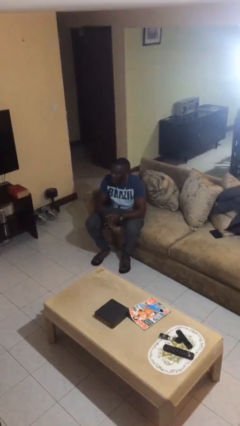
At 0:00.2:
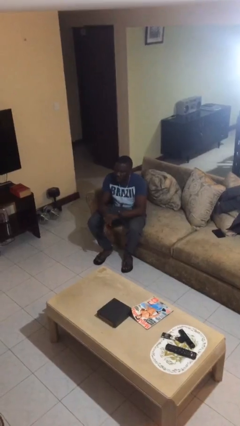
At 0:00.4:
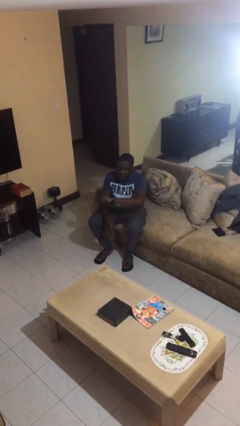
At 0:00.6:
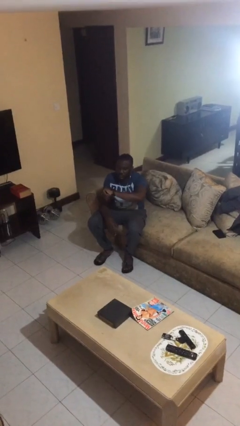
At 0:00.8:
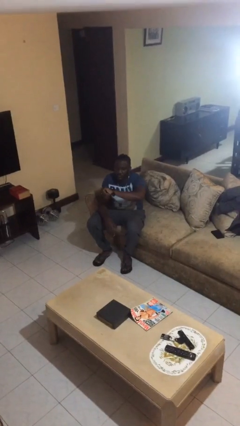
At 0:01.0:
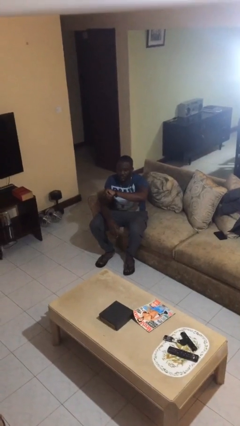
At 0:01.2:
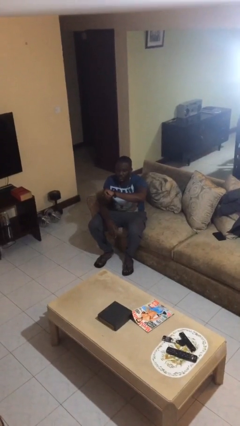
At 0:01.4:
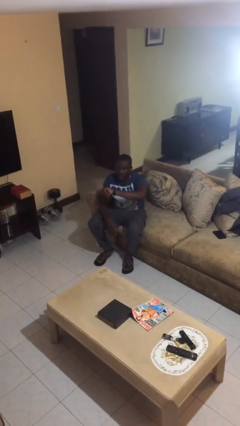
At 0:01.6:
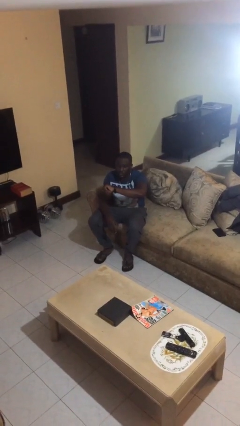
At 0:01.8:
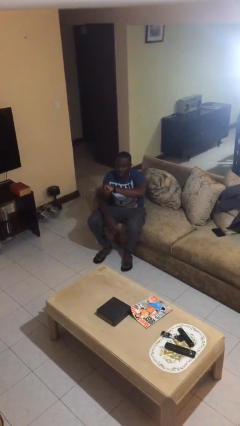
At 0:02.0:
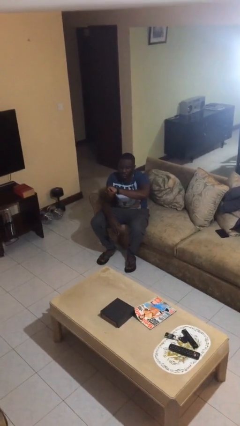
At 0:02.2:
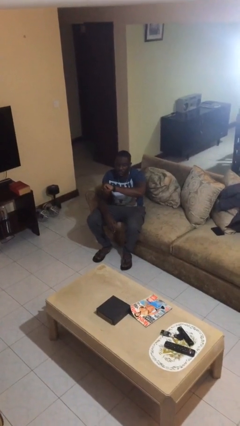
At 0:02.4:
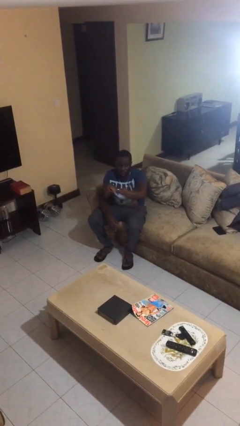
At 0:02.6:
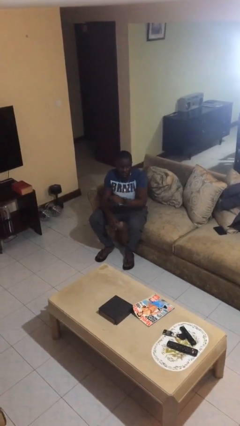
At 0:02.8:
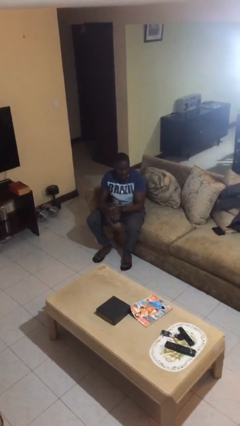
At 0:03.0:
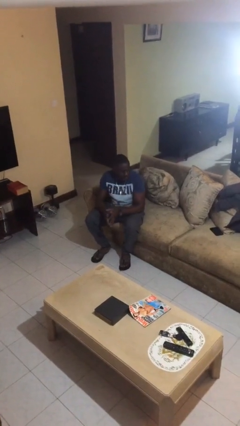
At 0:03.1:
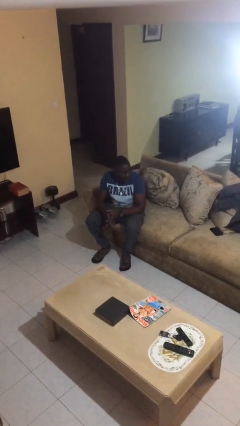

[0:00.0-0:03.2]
person looks at wristwatch

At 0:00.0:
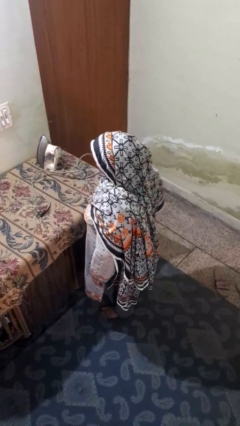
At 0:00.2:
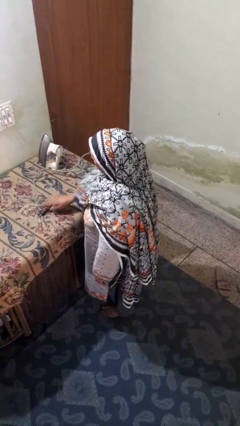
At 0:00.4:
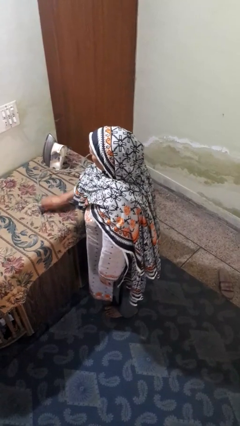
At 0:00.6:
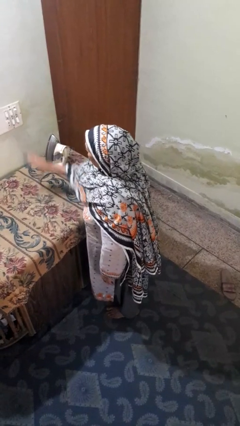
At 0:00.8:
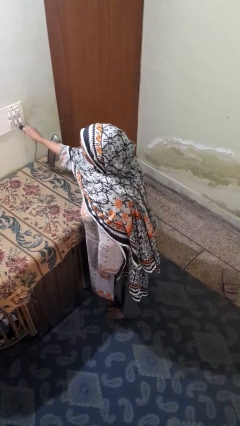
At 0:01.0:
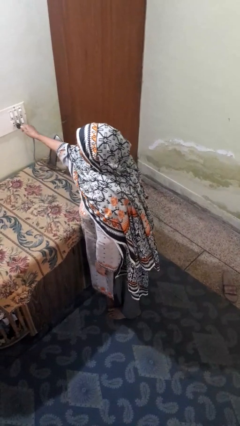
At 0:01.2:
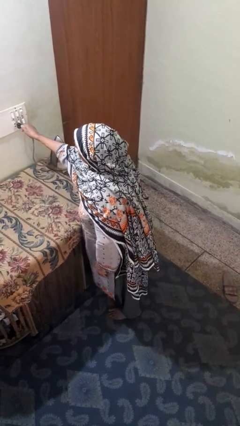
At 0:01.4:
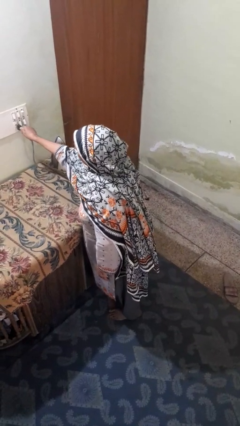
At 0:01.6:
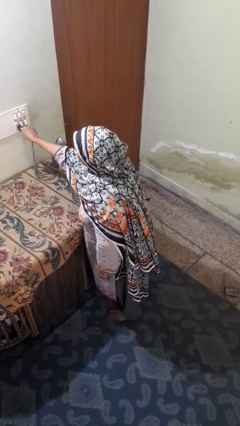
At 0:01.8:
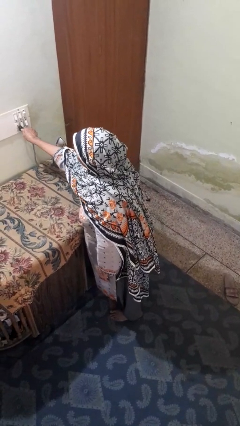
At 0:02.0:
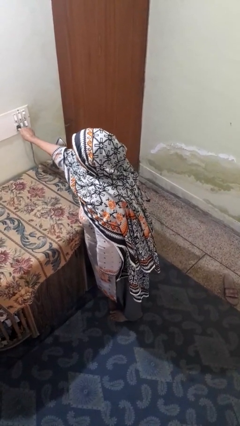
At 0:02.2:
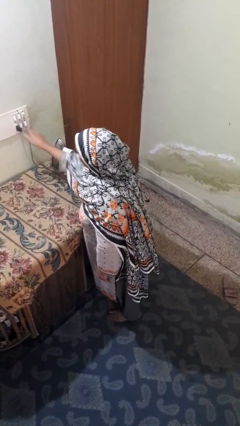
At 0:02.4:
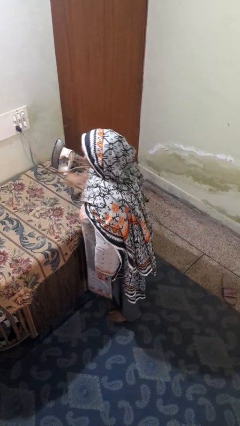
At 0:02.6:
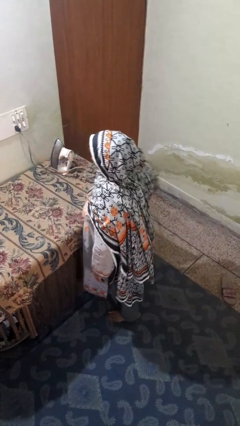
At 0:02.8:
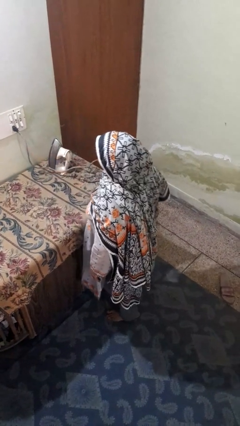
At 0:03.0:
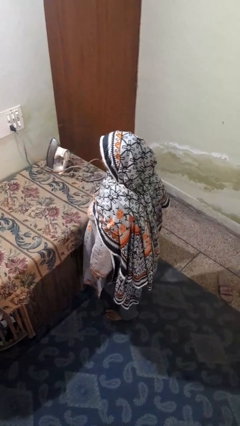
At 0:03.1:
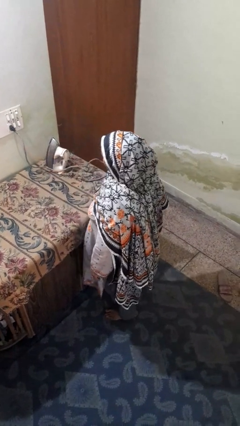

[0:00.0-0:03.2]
person plugs into electrical socket

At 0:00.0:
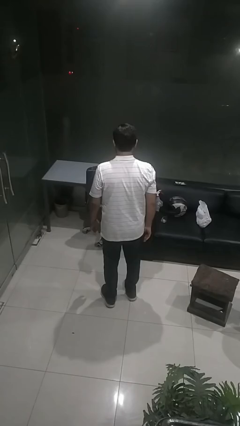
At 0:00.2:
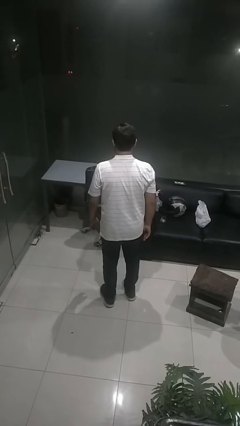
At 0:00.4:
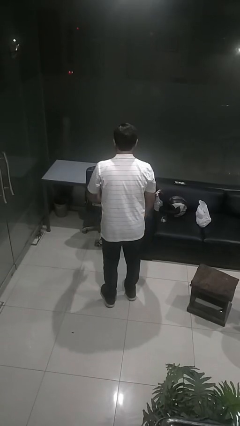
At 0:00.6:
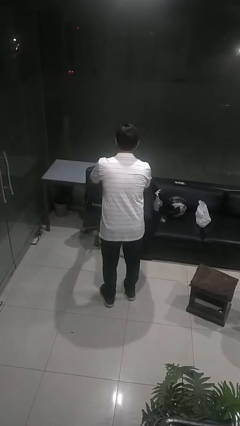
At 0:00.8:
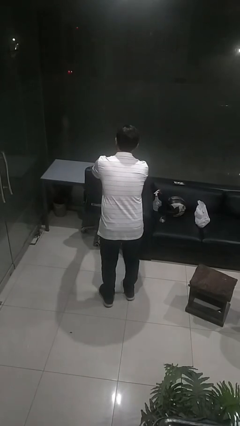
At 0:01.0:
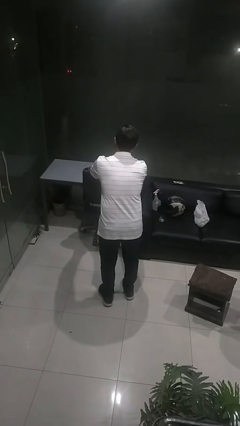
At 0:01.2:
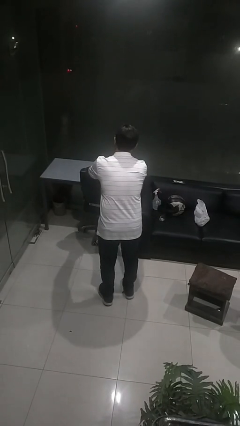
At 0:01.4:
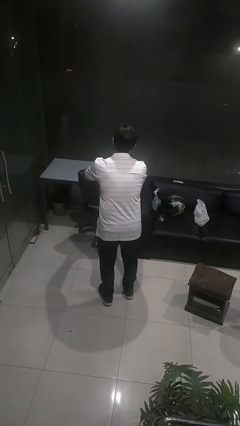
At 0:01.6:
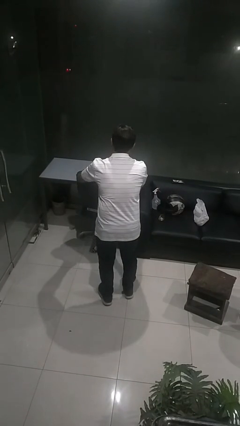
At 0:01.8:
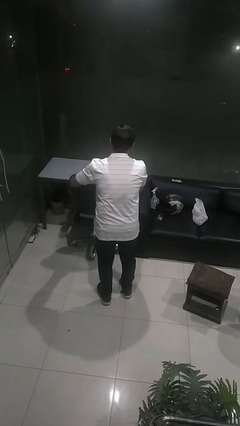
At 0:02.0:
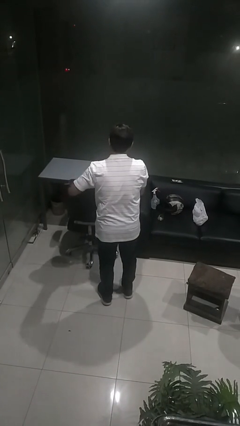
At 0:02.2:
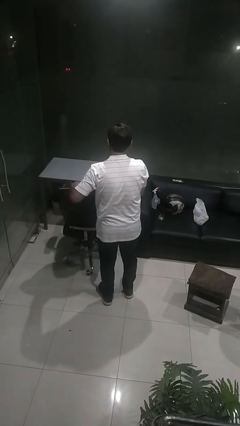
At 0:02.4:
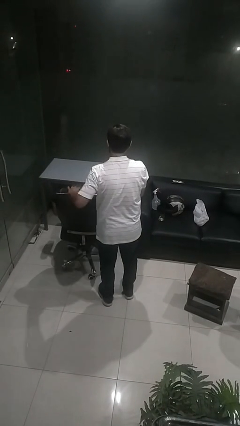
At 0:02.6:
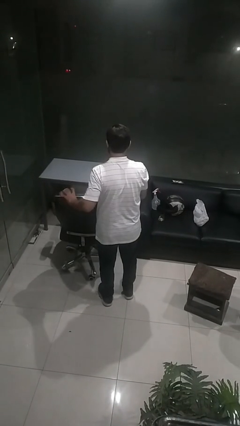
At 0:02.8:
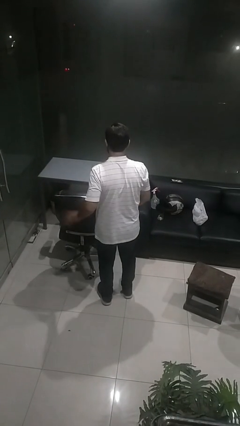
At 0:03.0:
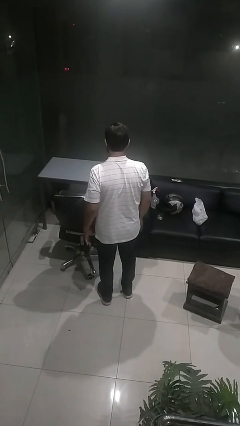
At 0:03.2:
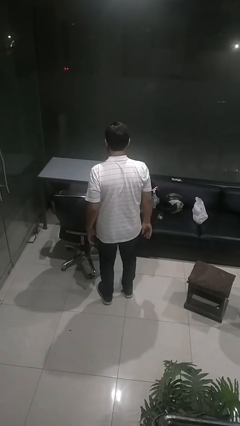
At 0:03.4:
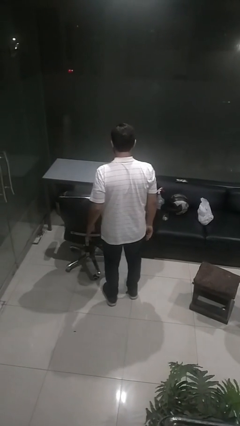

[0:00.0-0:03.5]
person pulls out chair

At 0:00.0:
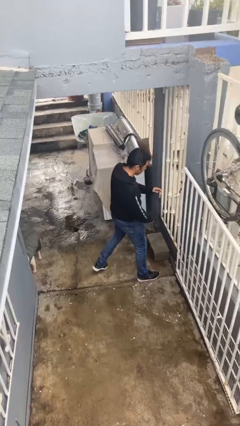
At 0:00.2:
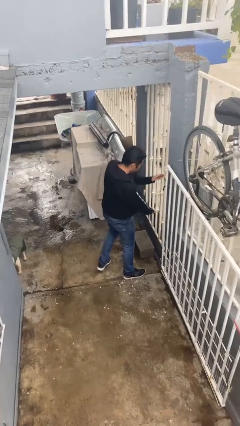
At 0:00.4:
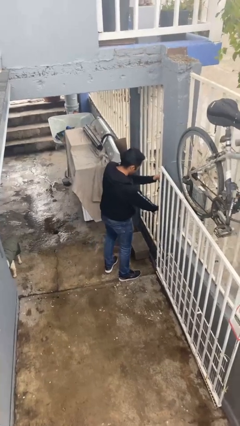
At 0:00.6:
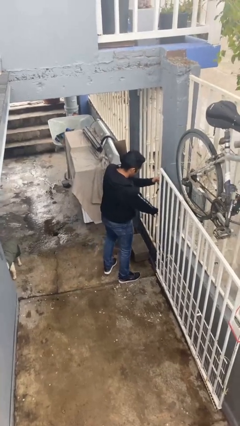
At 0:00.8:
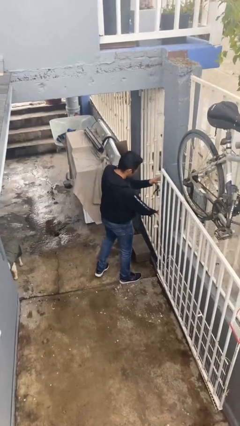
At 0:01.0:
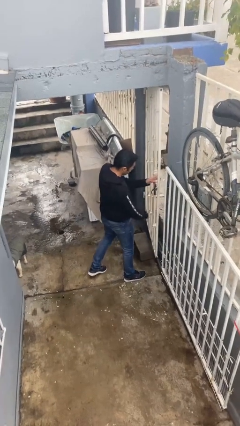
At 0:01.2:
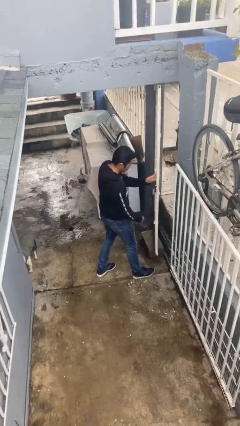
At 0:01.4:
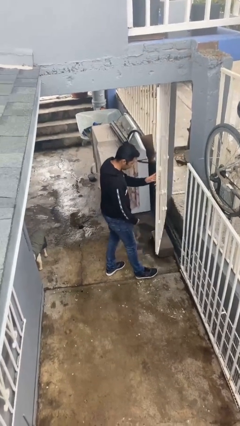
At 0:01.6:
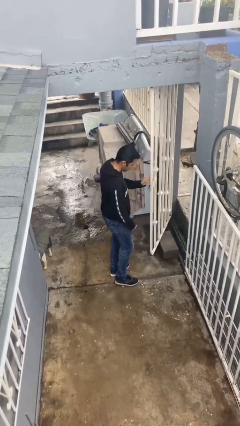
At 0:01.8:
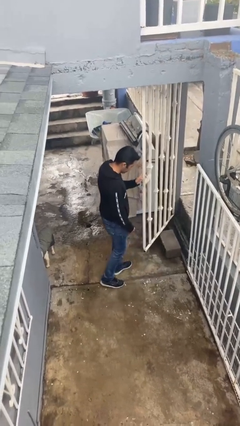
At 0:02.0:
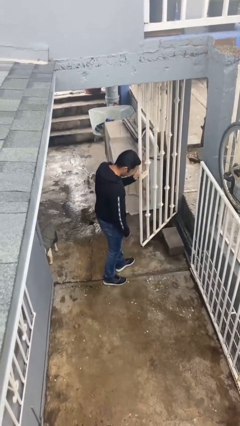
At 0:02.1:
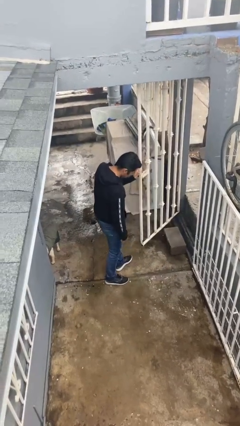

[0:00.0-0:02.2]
person opens facility door

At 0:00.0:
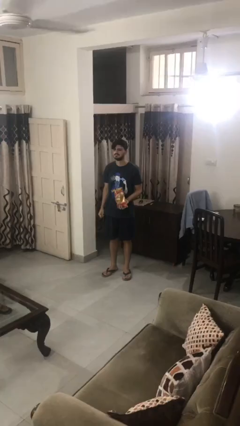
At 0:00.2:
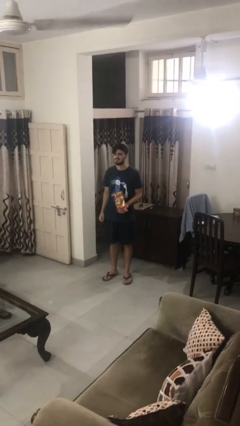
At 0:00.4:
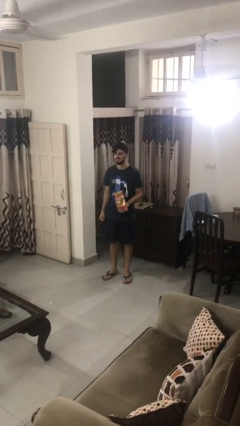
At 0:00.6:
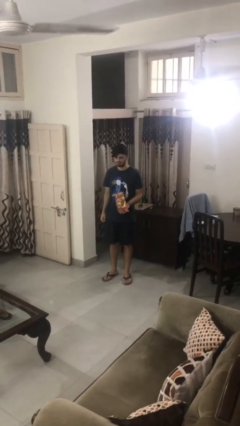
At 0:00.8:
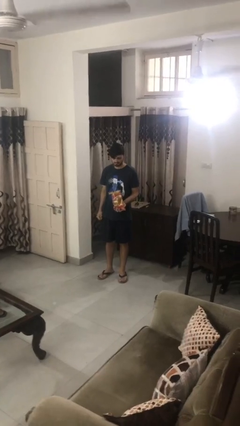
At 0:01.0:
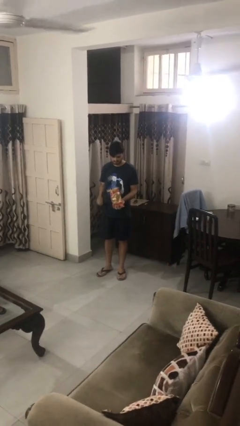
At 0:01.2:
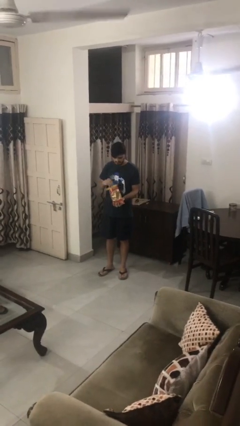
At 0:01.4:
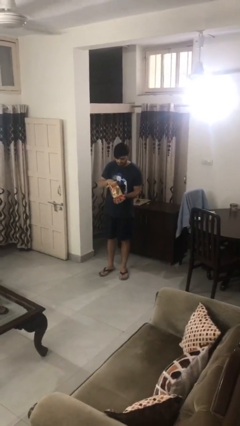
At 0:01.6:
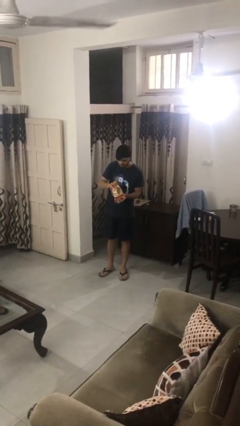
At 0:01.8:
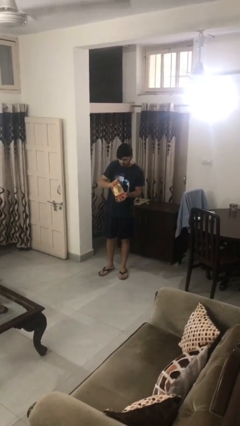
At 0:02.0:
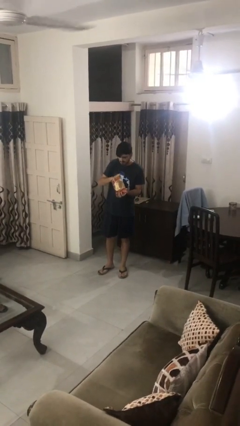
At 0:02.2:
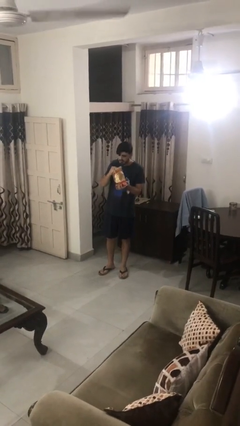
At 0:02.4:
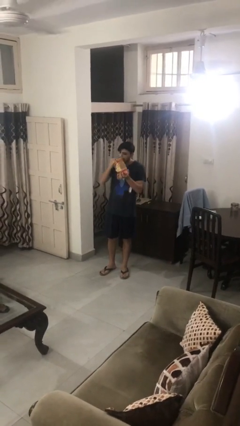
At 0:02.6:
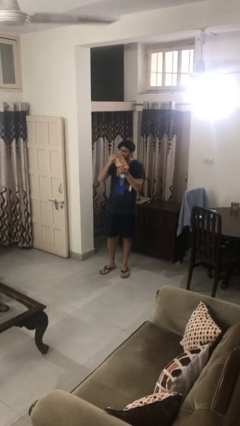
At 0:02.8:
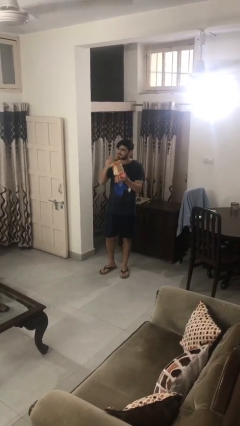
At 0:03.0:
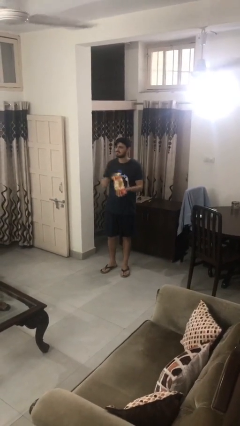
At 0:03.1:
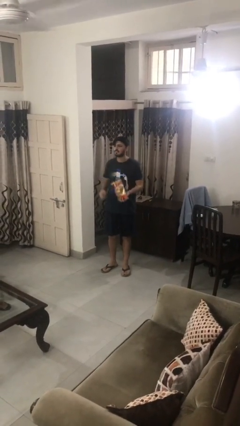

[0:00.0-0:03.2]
person eats snack from bag

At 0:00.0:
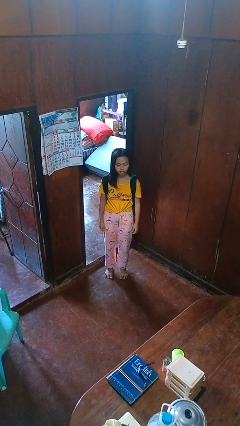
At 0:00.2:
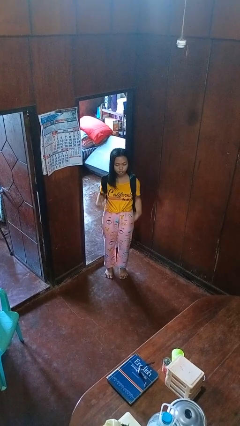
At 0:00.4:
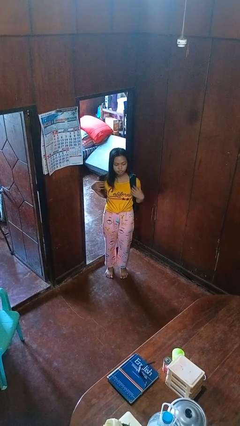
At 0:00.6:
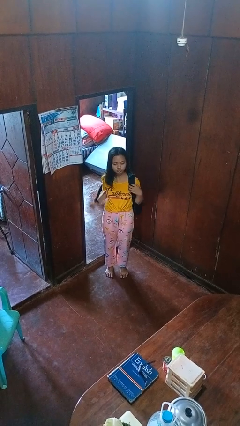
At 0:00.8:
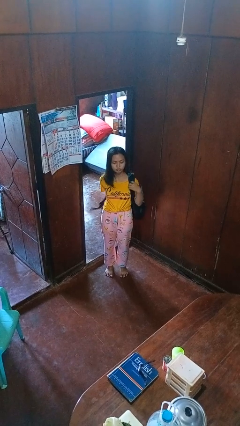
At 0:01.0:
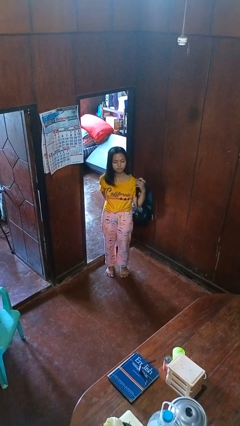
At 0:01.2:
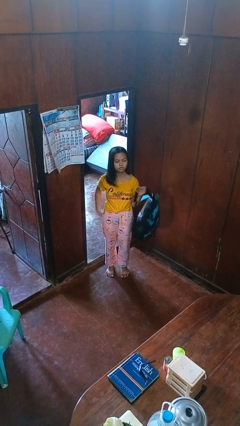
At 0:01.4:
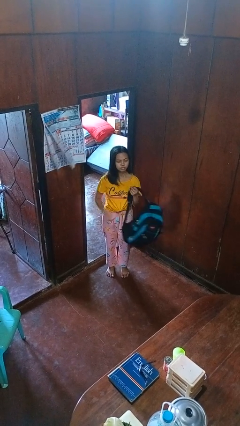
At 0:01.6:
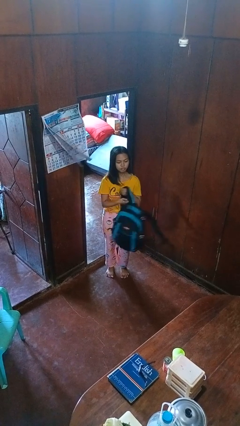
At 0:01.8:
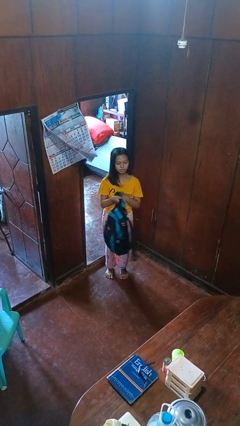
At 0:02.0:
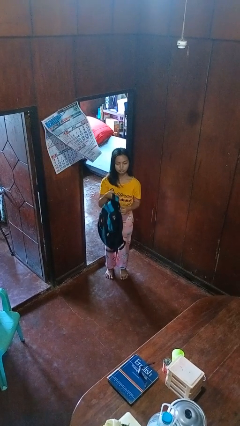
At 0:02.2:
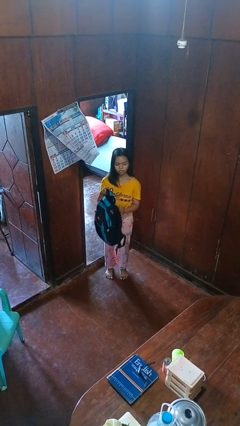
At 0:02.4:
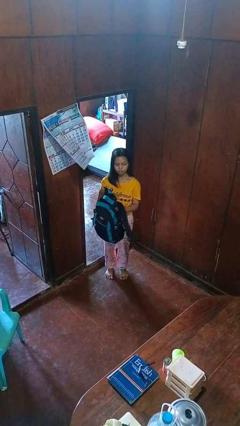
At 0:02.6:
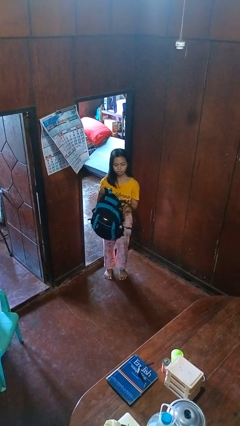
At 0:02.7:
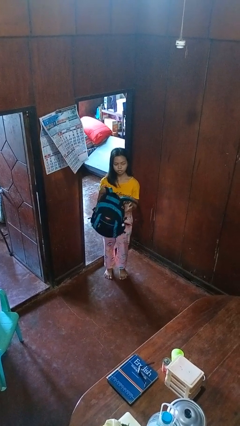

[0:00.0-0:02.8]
person takes off backpack
